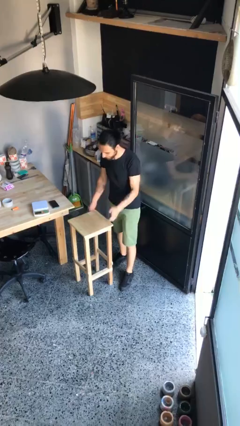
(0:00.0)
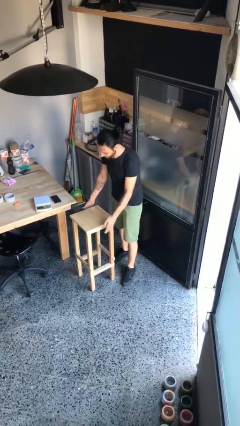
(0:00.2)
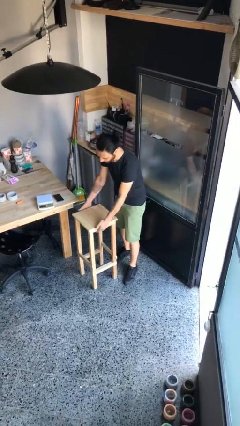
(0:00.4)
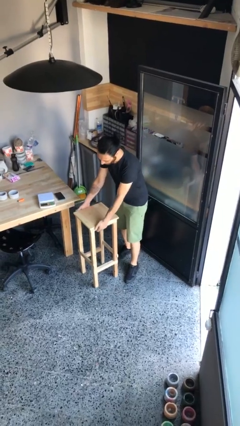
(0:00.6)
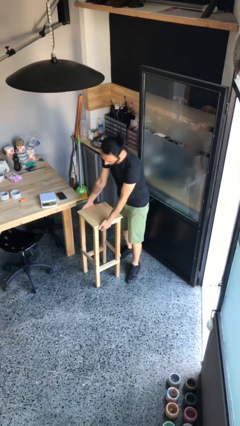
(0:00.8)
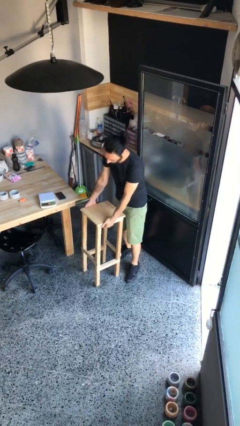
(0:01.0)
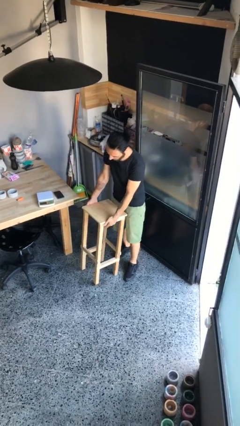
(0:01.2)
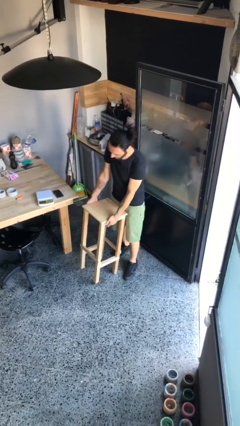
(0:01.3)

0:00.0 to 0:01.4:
person picks up object from floor

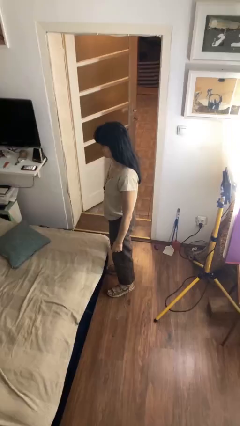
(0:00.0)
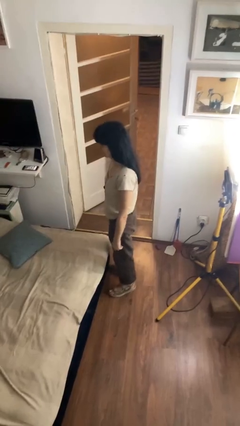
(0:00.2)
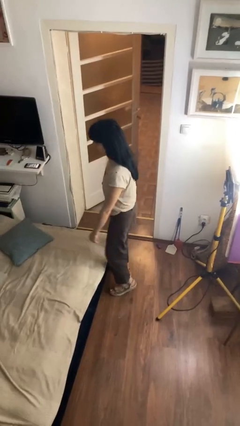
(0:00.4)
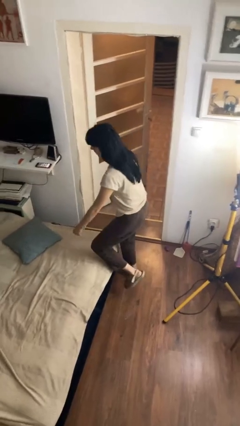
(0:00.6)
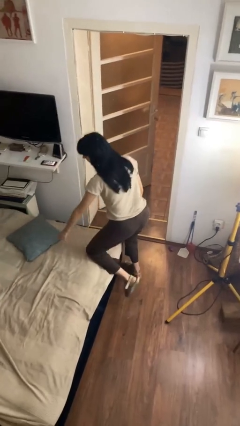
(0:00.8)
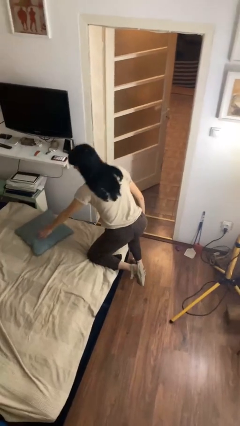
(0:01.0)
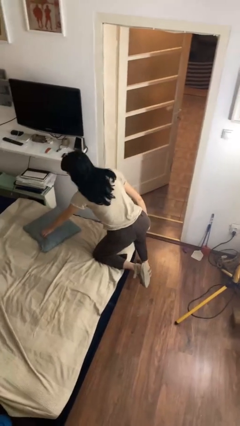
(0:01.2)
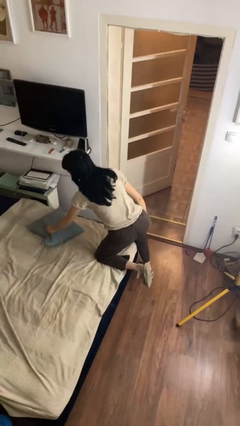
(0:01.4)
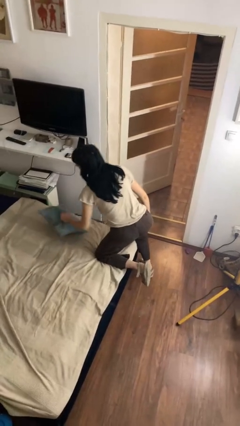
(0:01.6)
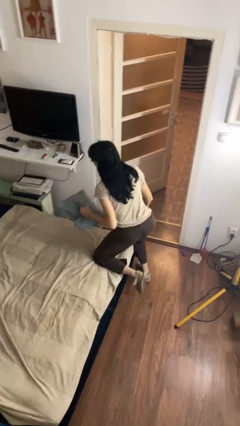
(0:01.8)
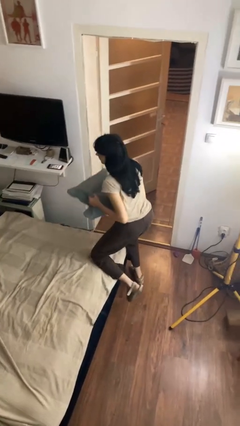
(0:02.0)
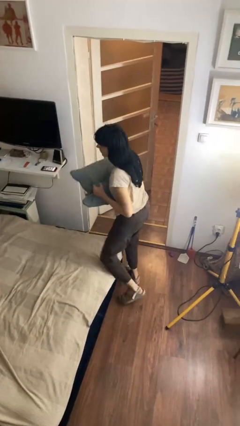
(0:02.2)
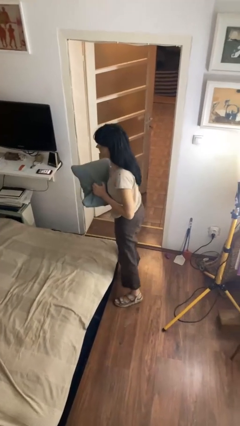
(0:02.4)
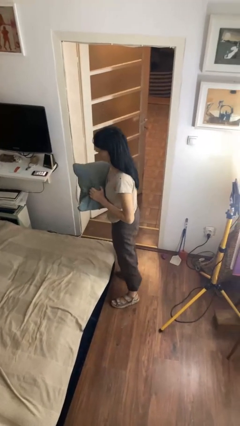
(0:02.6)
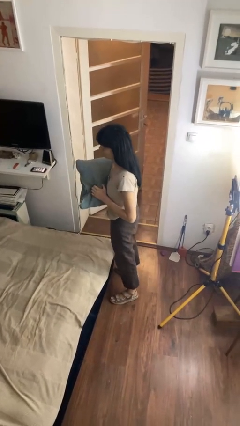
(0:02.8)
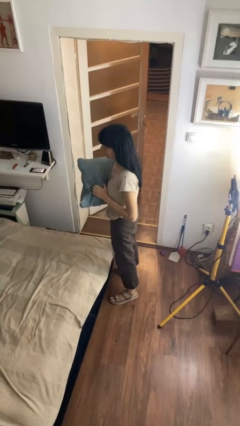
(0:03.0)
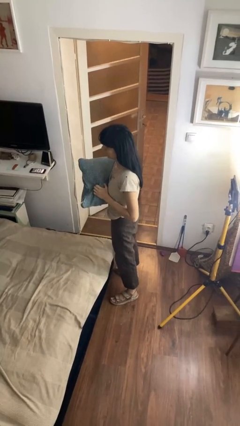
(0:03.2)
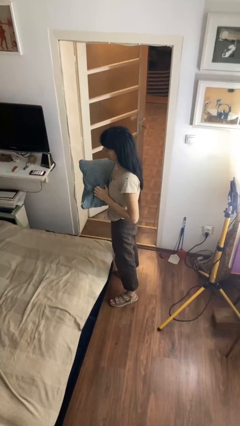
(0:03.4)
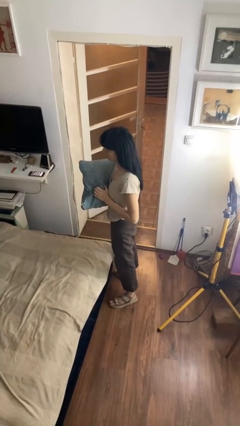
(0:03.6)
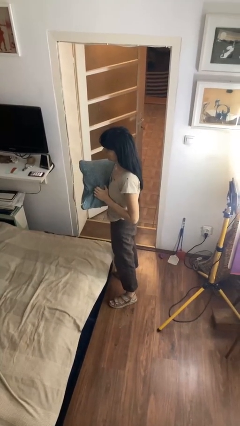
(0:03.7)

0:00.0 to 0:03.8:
person picks up object from bed

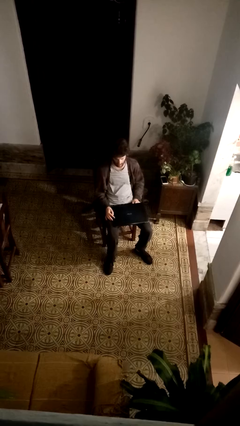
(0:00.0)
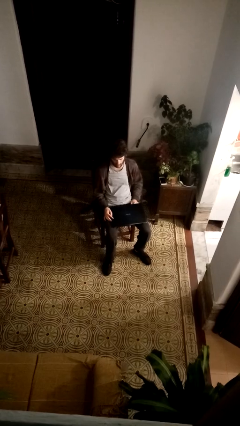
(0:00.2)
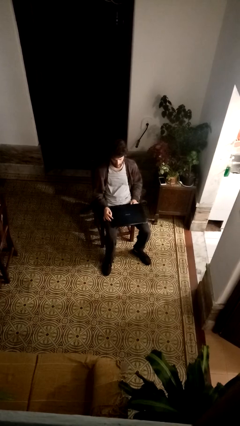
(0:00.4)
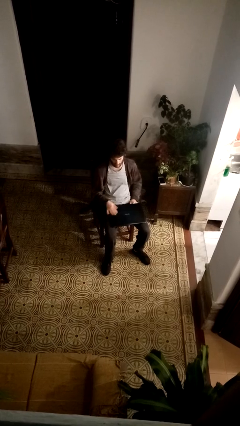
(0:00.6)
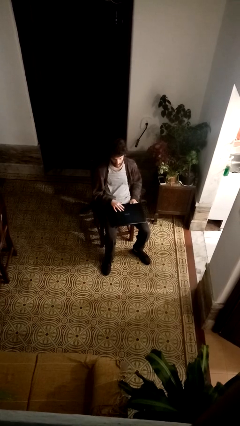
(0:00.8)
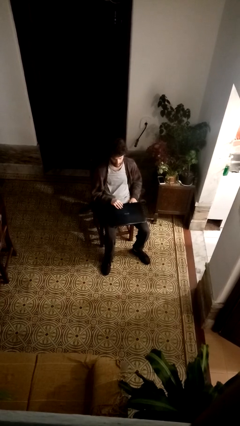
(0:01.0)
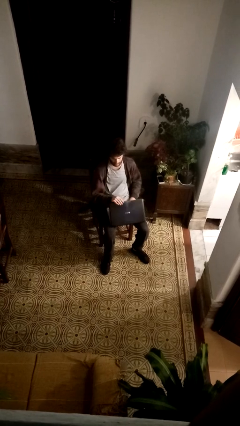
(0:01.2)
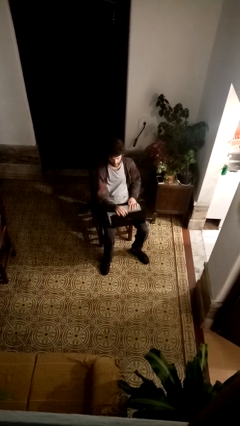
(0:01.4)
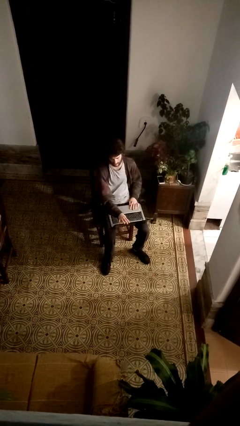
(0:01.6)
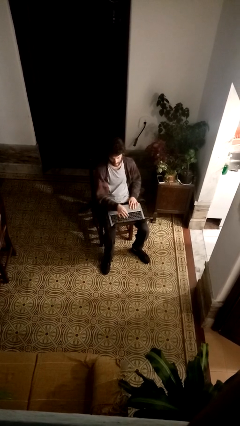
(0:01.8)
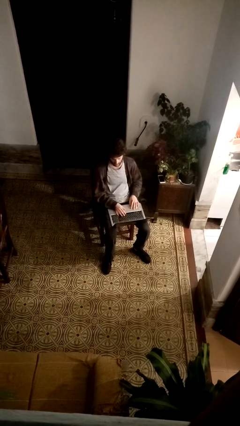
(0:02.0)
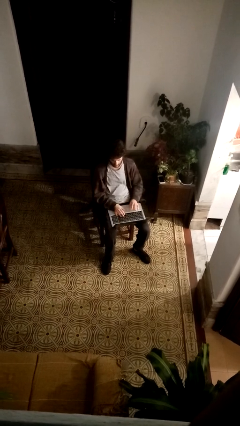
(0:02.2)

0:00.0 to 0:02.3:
person opens laptop

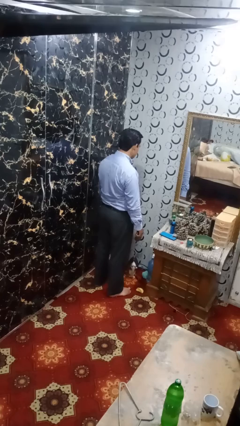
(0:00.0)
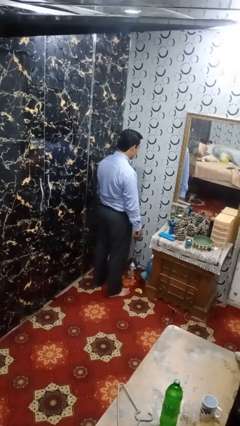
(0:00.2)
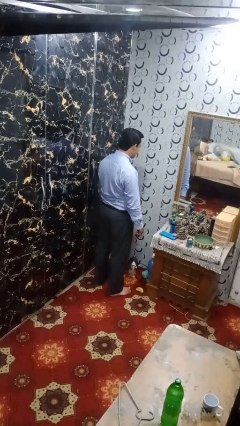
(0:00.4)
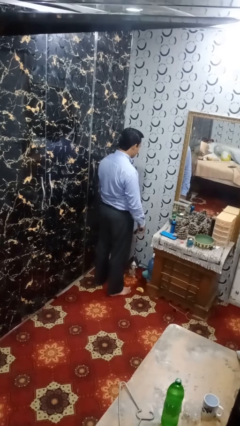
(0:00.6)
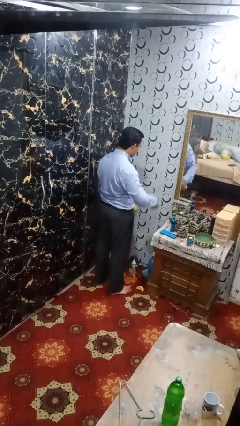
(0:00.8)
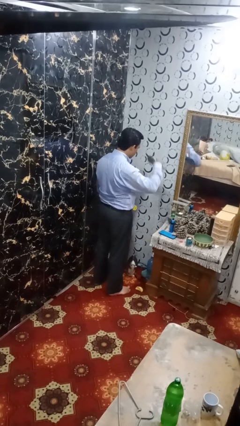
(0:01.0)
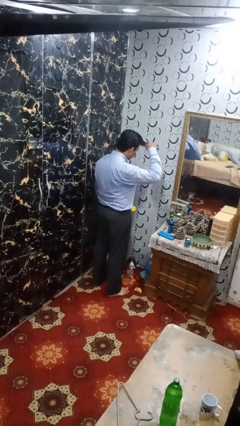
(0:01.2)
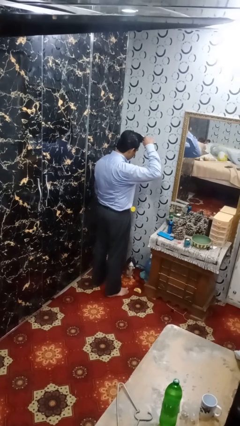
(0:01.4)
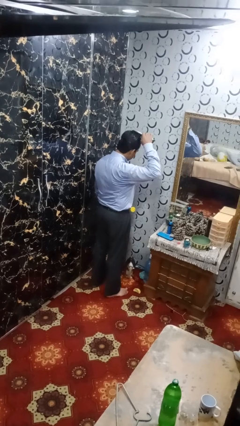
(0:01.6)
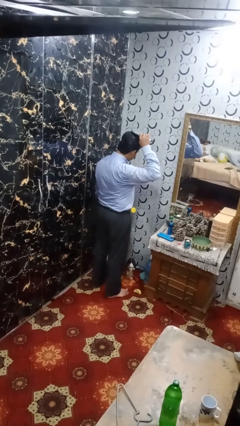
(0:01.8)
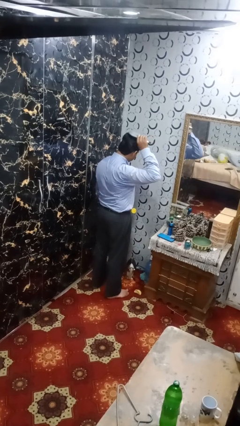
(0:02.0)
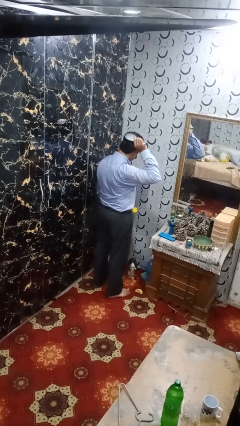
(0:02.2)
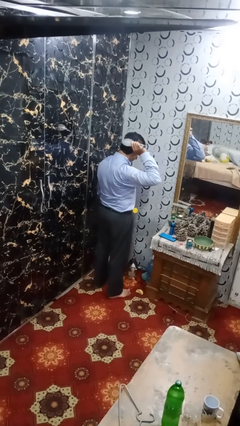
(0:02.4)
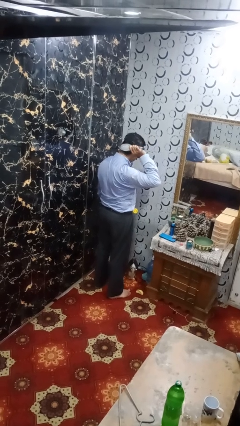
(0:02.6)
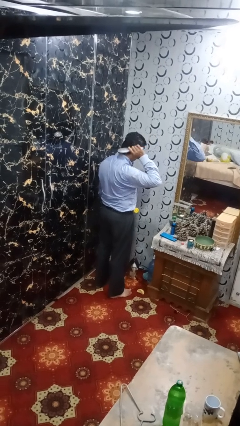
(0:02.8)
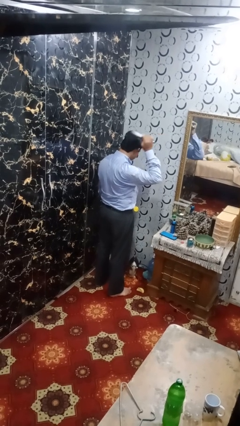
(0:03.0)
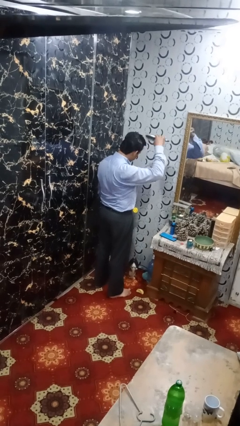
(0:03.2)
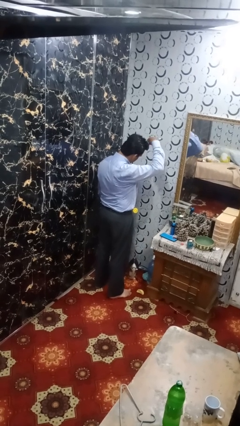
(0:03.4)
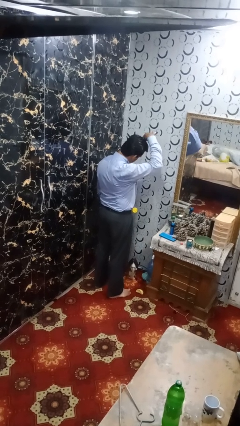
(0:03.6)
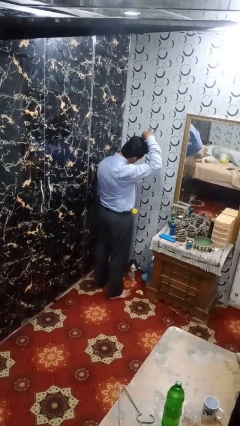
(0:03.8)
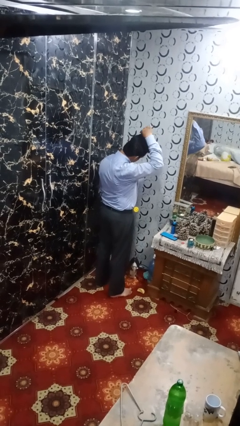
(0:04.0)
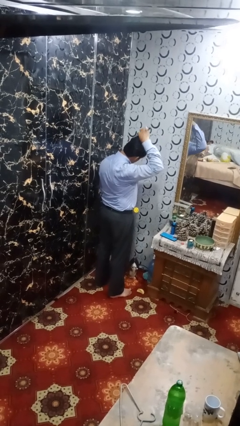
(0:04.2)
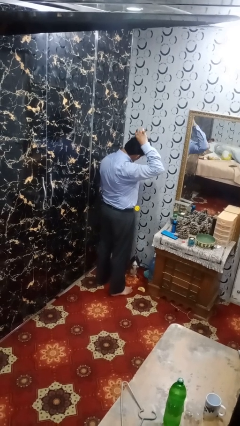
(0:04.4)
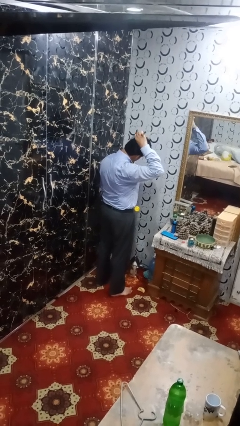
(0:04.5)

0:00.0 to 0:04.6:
person brushes hair

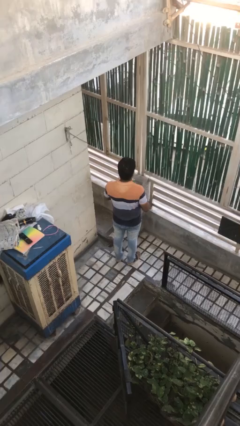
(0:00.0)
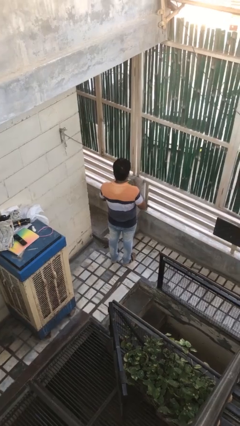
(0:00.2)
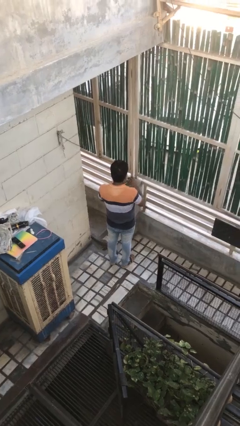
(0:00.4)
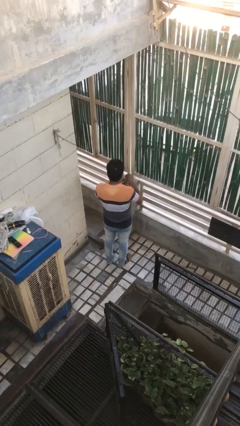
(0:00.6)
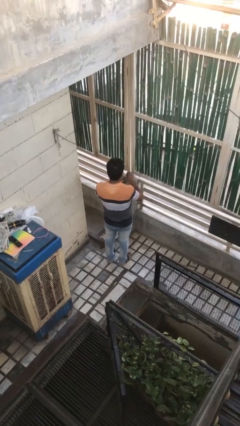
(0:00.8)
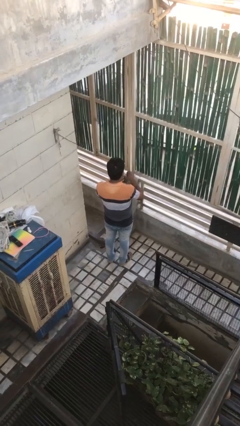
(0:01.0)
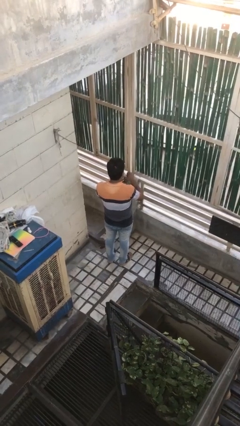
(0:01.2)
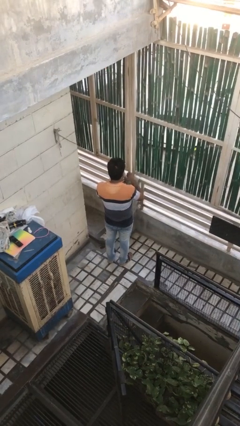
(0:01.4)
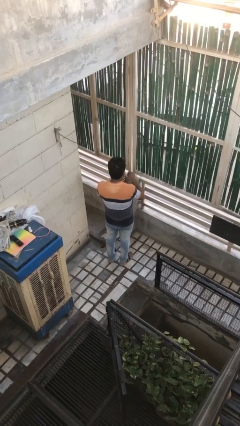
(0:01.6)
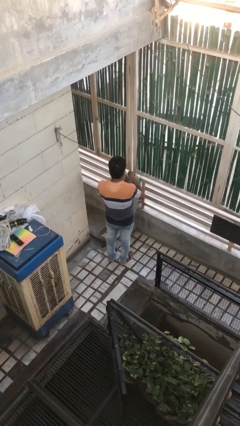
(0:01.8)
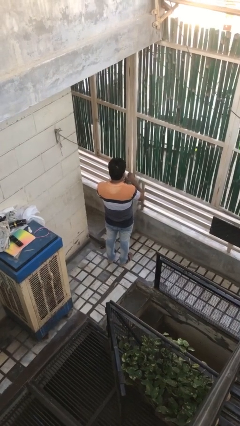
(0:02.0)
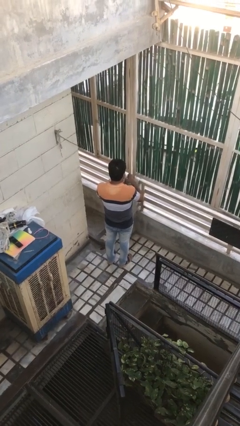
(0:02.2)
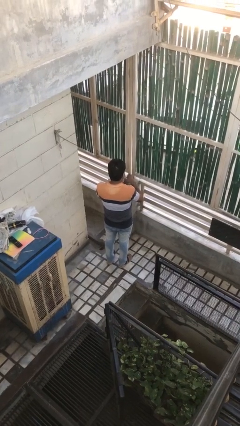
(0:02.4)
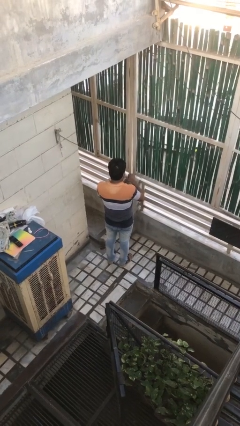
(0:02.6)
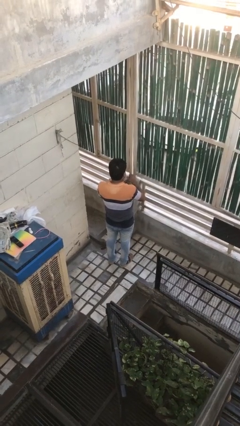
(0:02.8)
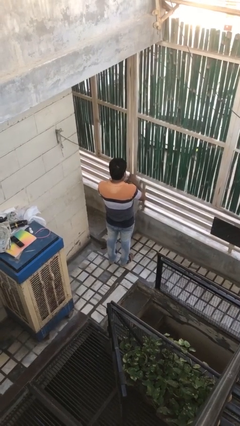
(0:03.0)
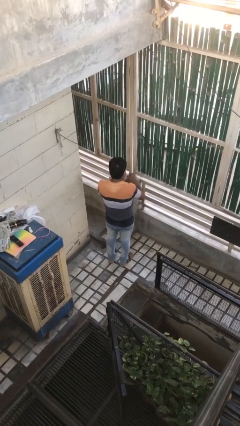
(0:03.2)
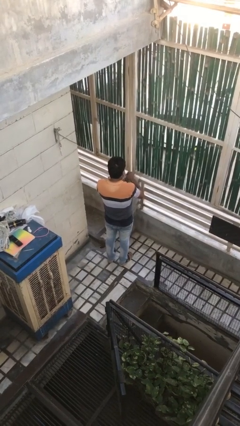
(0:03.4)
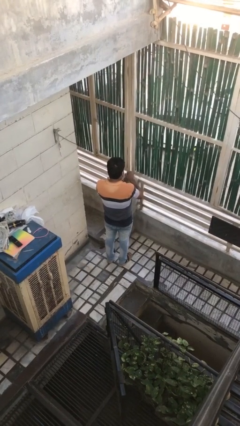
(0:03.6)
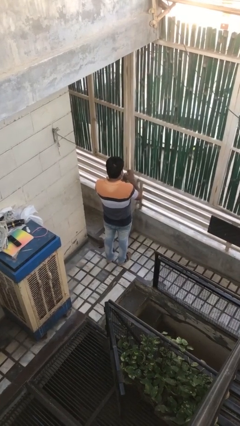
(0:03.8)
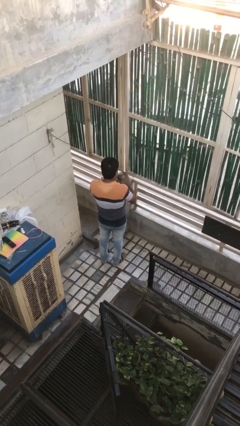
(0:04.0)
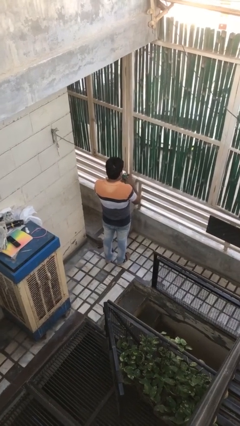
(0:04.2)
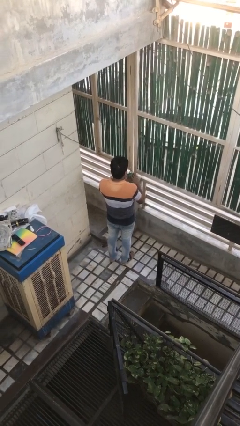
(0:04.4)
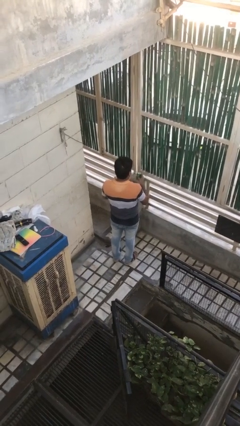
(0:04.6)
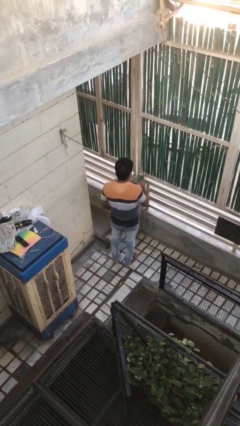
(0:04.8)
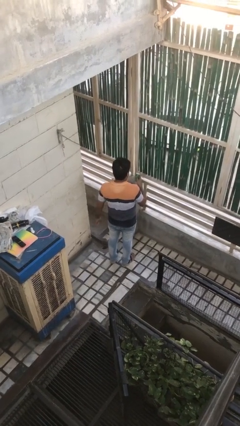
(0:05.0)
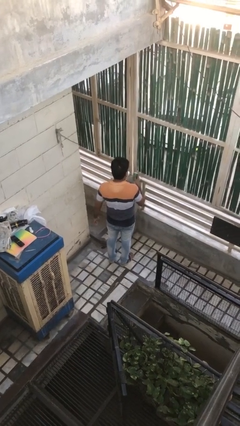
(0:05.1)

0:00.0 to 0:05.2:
person opens beverage can

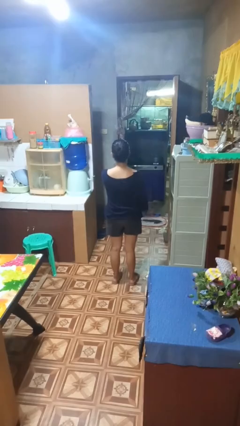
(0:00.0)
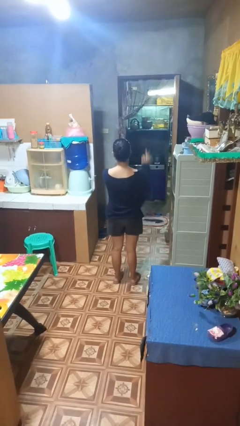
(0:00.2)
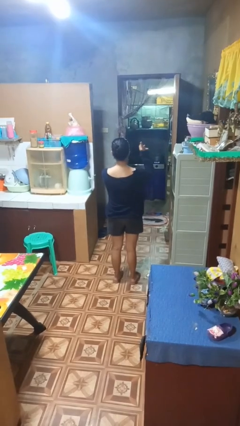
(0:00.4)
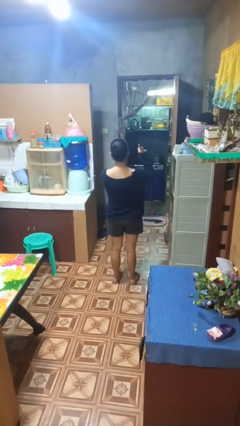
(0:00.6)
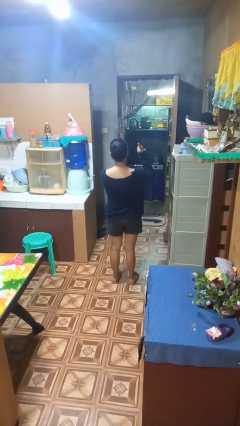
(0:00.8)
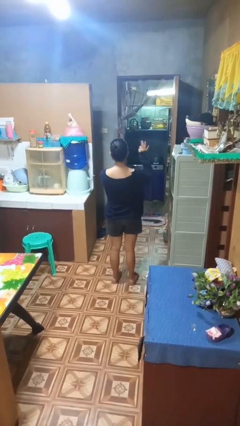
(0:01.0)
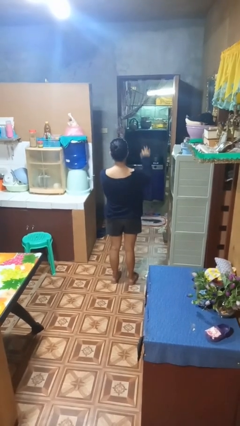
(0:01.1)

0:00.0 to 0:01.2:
person gestures number three
